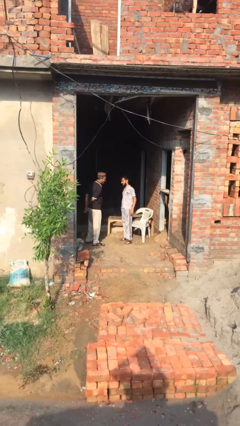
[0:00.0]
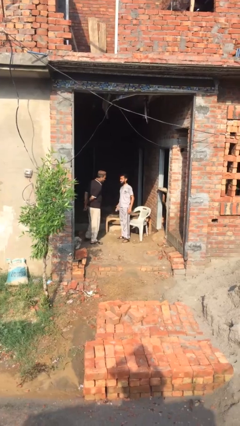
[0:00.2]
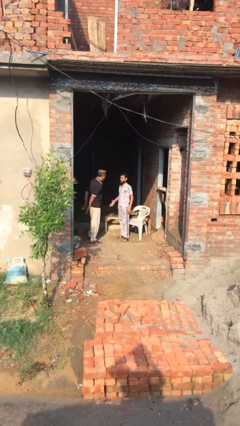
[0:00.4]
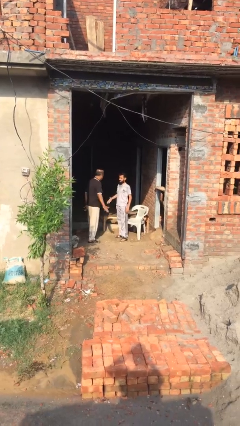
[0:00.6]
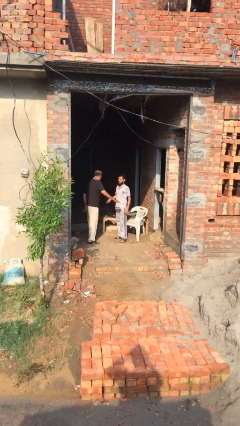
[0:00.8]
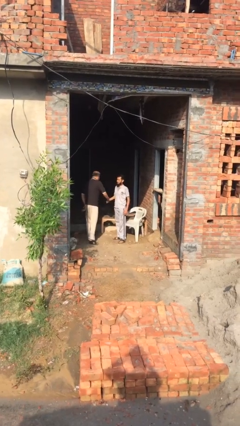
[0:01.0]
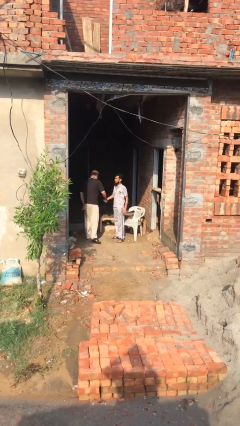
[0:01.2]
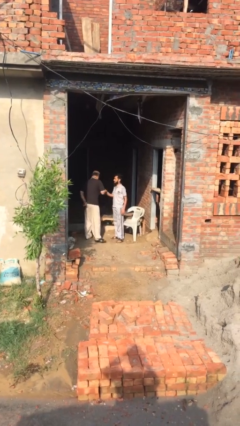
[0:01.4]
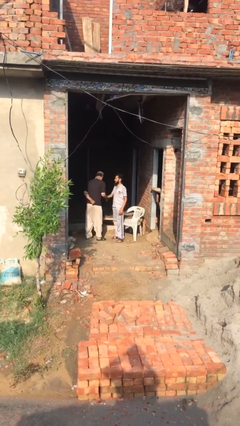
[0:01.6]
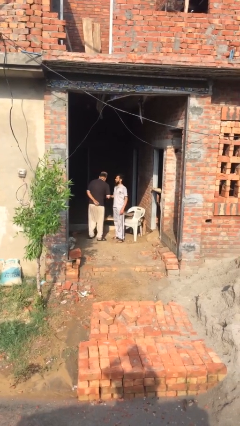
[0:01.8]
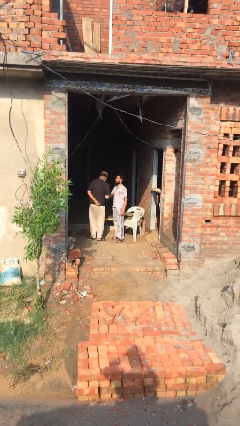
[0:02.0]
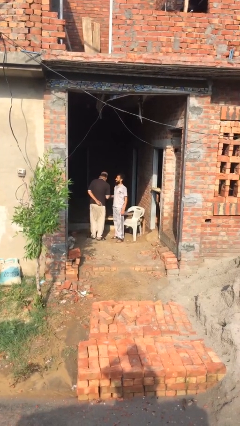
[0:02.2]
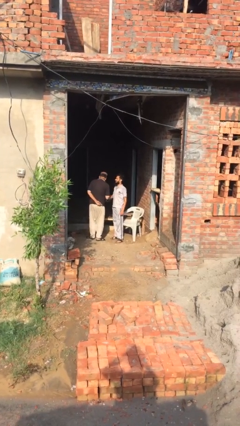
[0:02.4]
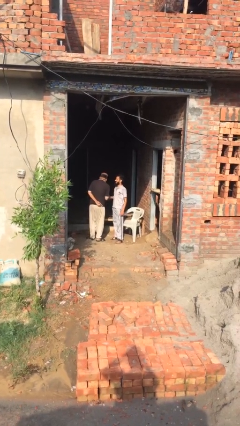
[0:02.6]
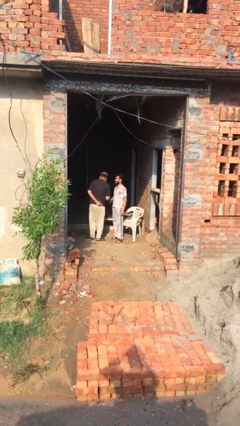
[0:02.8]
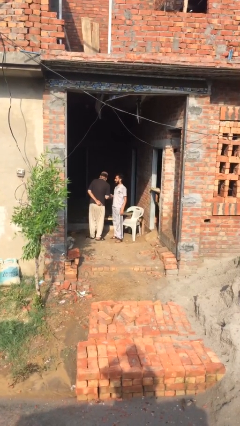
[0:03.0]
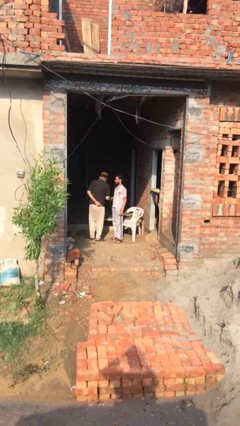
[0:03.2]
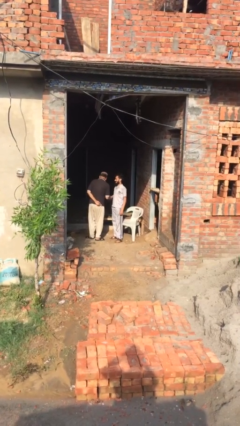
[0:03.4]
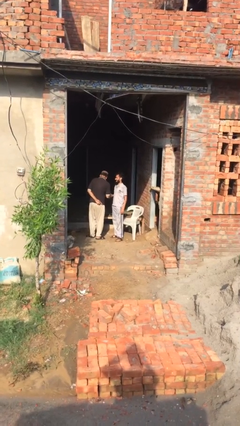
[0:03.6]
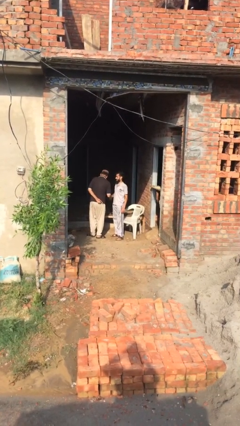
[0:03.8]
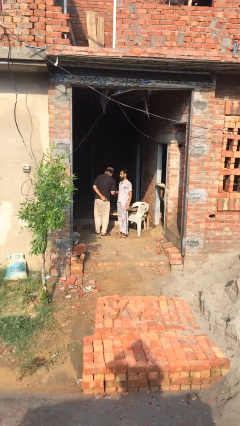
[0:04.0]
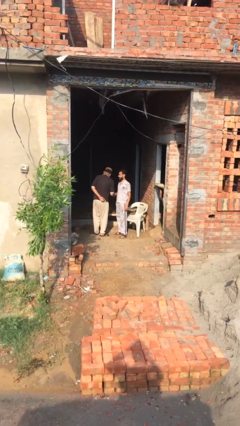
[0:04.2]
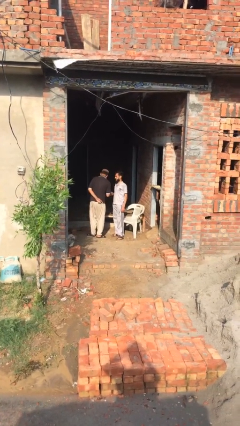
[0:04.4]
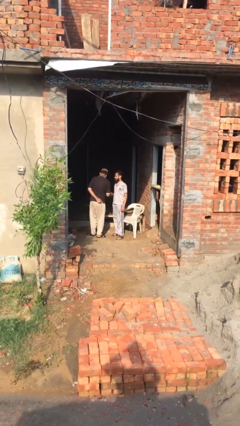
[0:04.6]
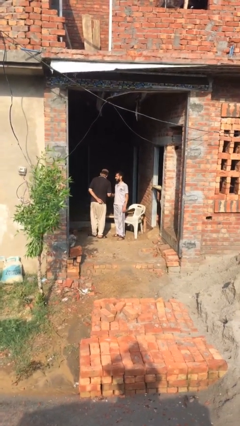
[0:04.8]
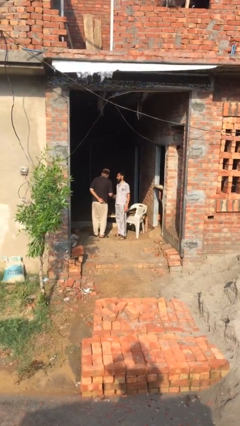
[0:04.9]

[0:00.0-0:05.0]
person shakes hand

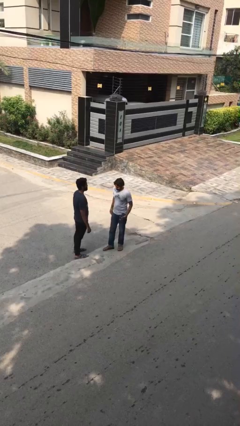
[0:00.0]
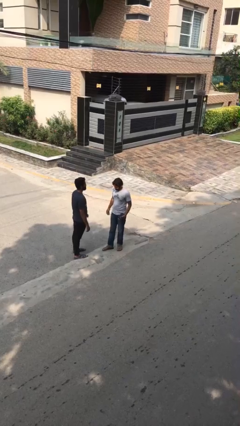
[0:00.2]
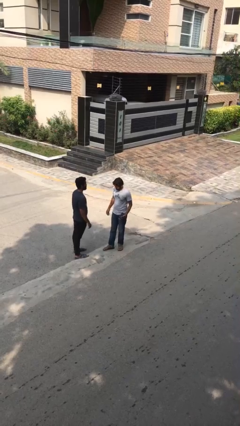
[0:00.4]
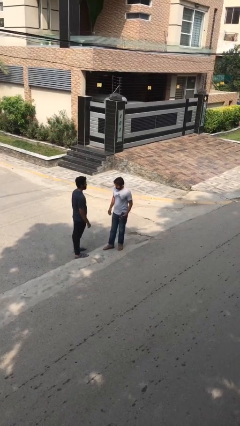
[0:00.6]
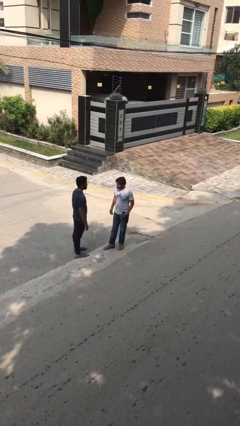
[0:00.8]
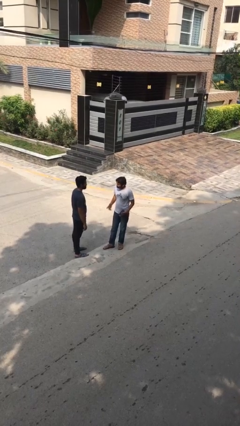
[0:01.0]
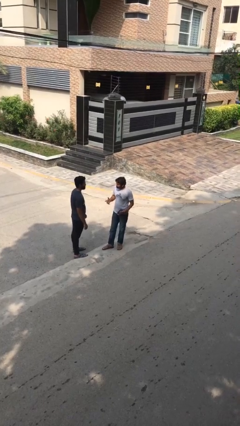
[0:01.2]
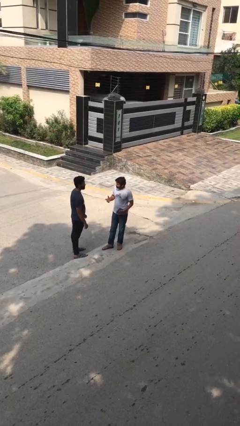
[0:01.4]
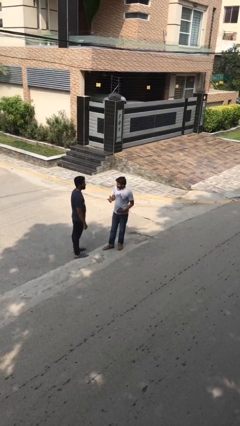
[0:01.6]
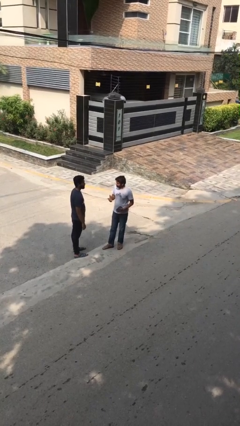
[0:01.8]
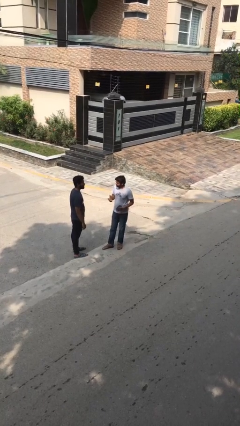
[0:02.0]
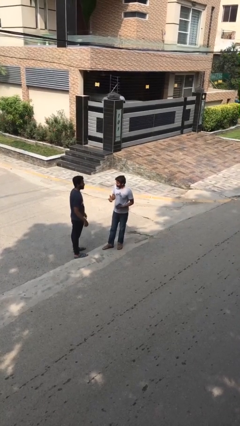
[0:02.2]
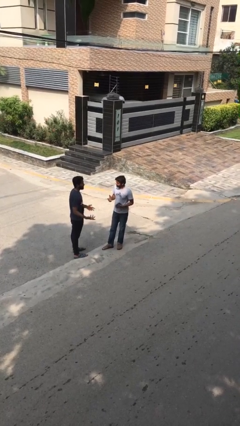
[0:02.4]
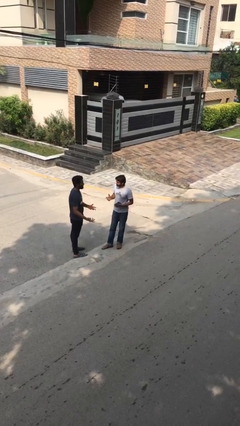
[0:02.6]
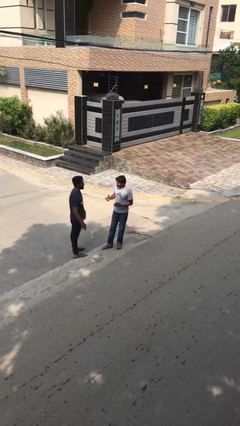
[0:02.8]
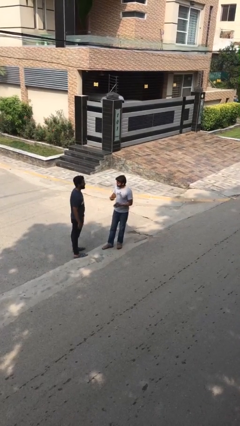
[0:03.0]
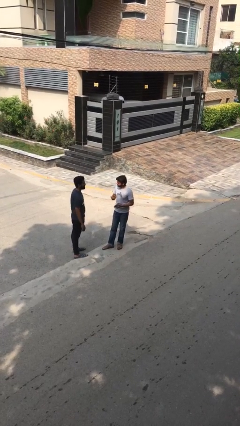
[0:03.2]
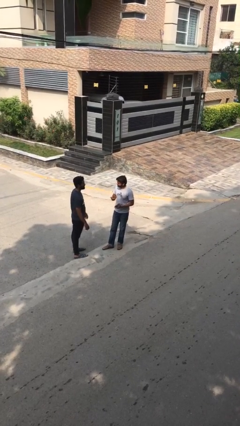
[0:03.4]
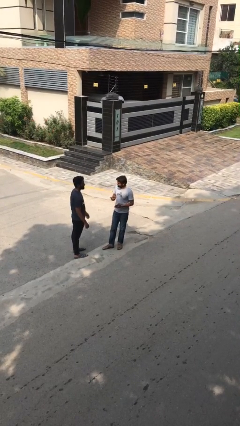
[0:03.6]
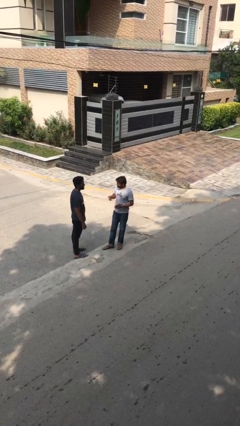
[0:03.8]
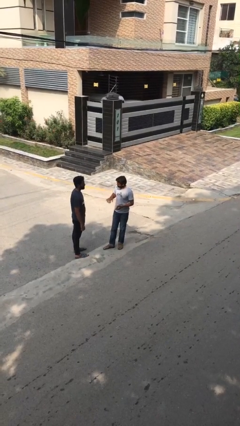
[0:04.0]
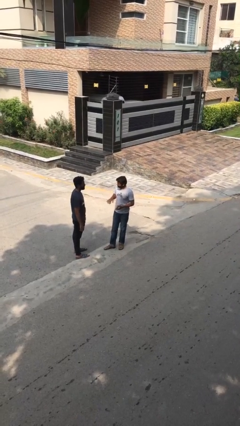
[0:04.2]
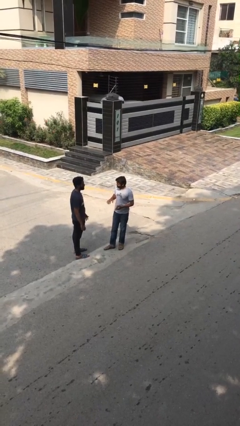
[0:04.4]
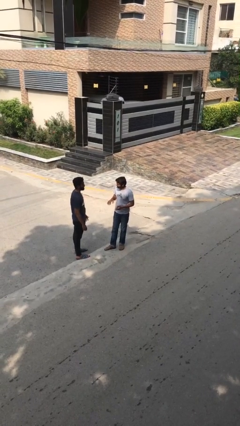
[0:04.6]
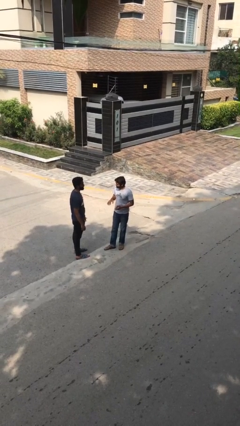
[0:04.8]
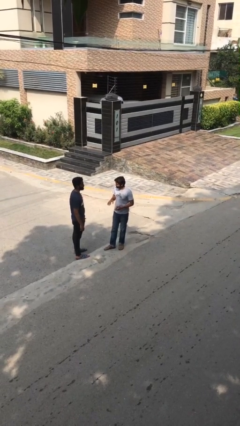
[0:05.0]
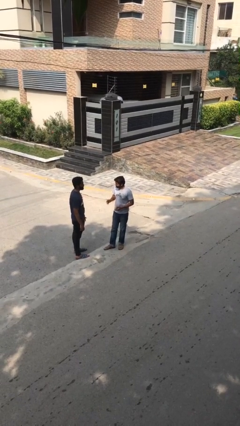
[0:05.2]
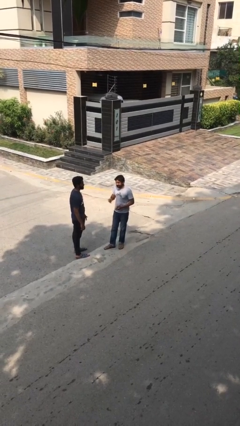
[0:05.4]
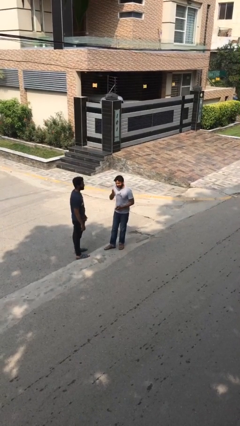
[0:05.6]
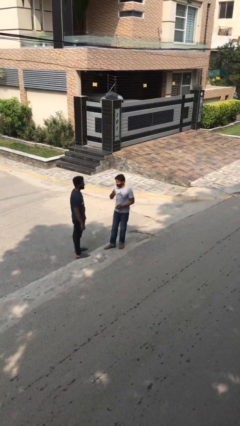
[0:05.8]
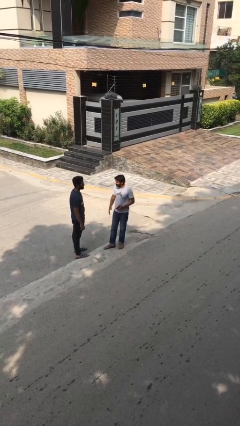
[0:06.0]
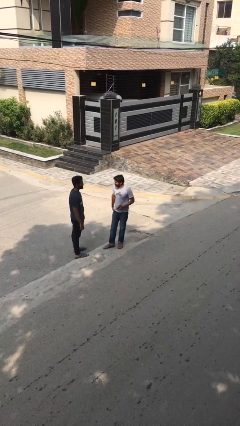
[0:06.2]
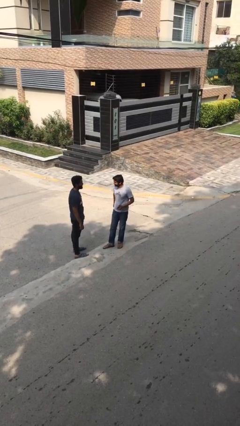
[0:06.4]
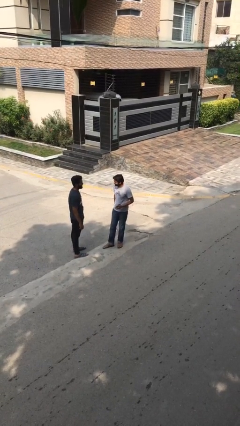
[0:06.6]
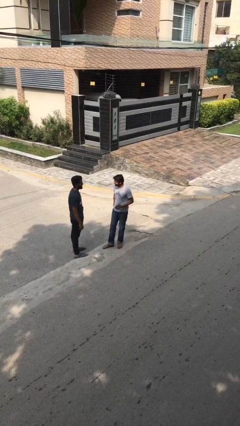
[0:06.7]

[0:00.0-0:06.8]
person talks to person

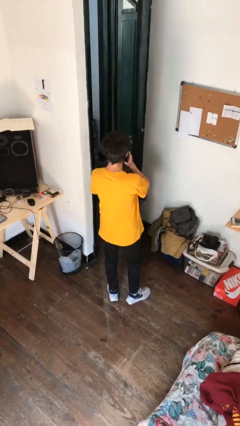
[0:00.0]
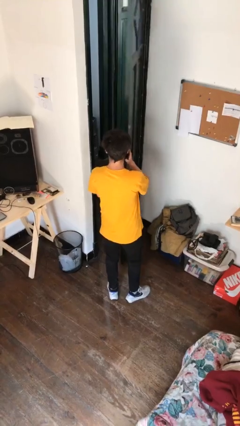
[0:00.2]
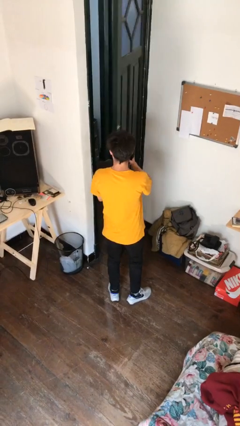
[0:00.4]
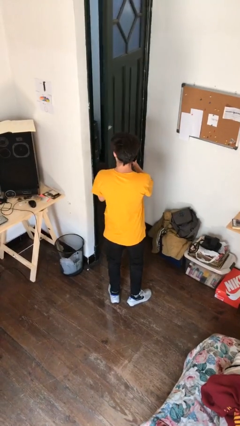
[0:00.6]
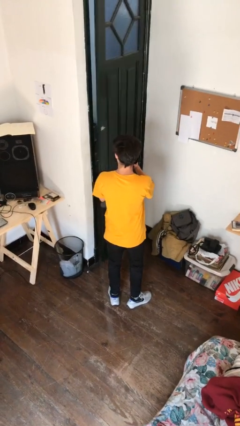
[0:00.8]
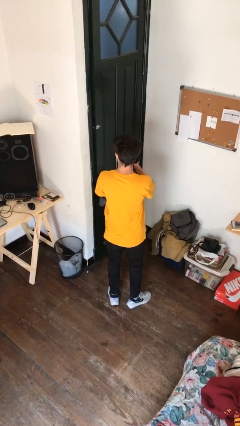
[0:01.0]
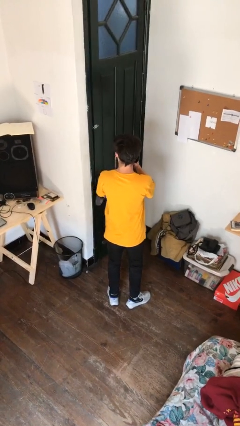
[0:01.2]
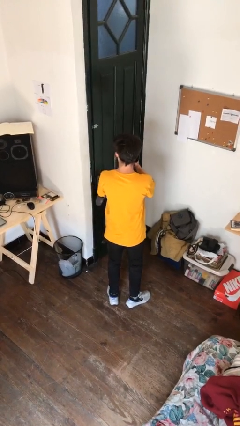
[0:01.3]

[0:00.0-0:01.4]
person closes facility door

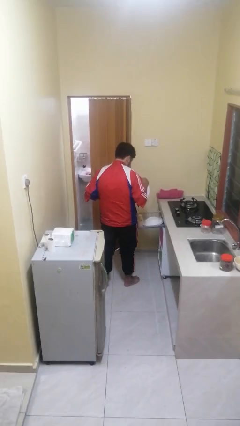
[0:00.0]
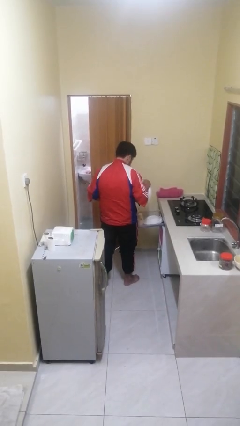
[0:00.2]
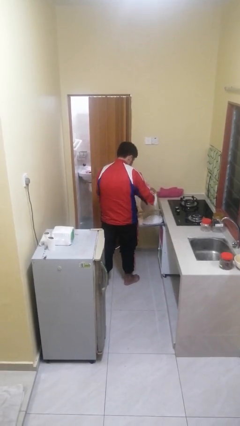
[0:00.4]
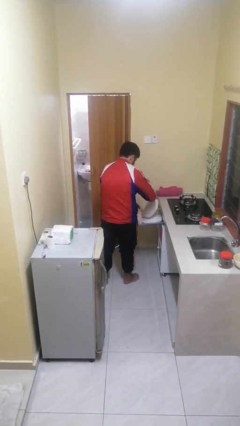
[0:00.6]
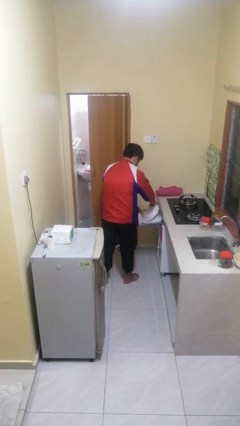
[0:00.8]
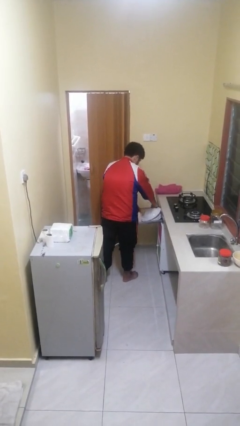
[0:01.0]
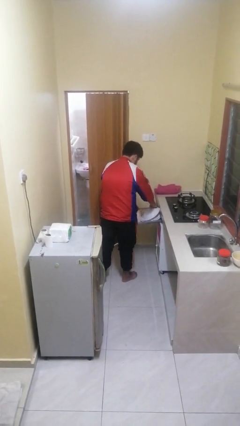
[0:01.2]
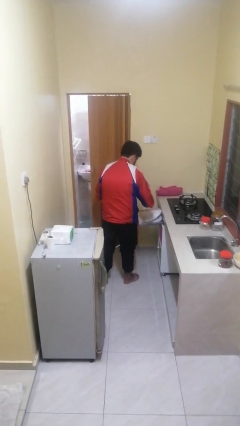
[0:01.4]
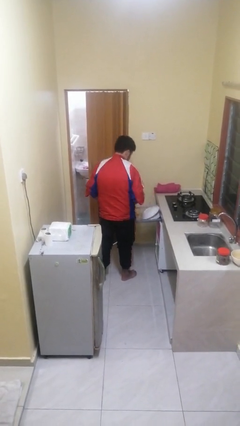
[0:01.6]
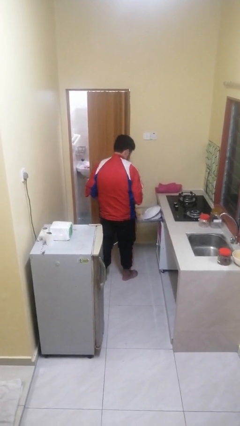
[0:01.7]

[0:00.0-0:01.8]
person puts object into kitchen drawer

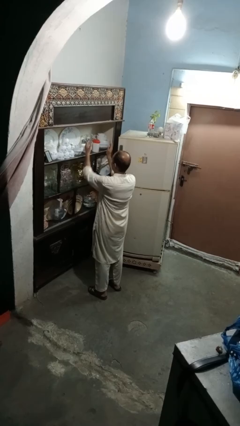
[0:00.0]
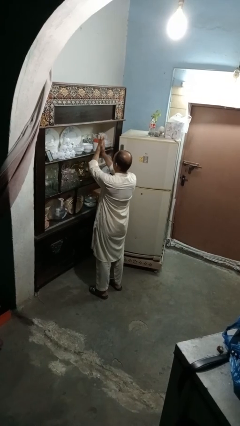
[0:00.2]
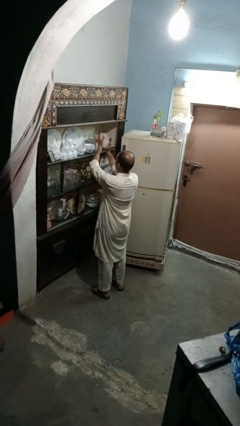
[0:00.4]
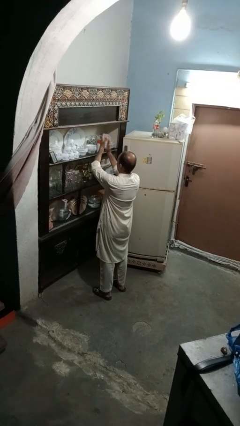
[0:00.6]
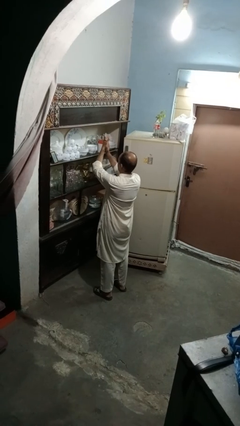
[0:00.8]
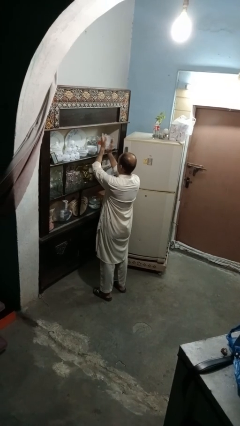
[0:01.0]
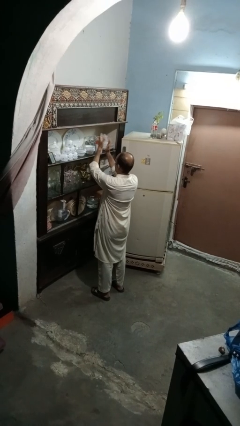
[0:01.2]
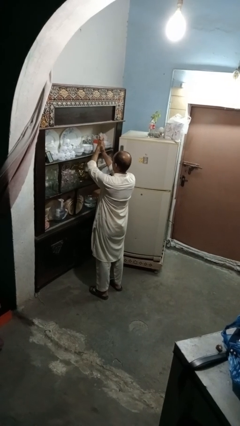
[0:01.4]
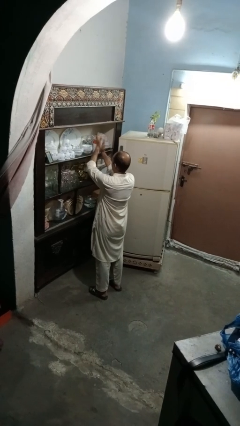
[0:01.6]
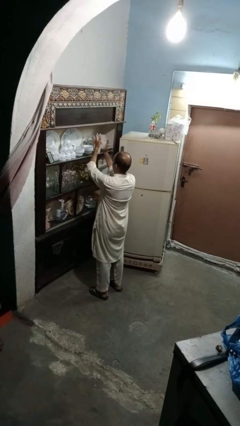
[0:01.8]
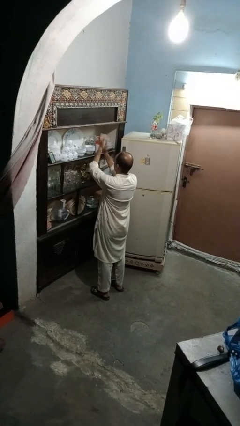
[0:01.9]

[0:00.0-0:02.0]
person claps hands

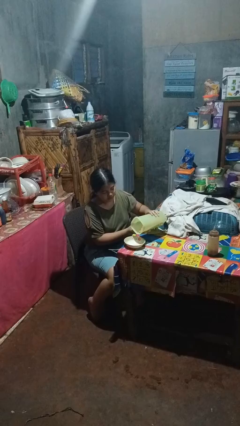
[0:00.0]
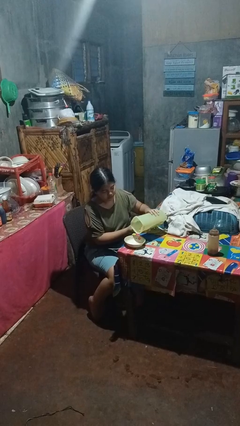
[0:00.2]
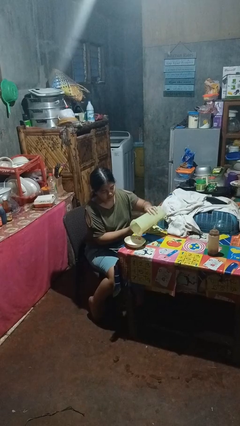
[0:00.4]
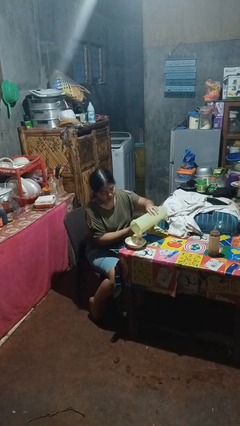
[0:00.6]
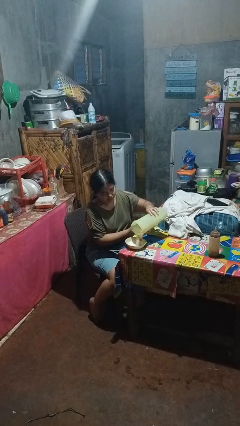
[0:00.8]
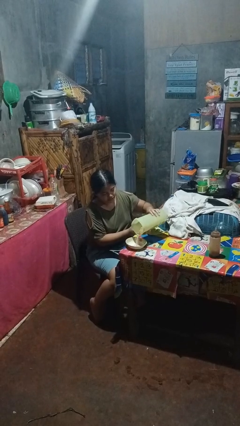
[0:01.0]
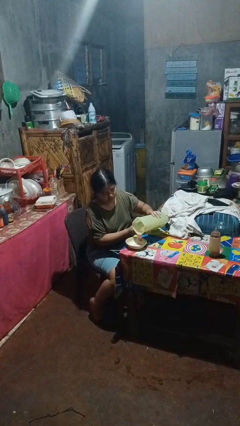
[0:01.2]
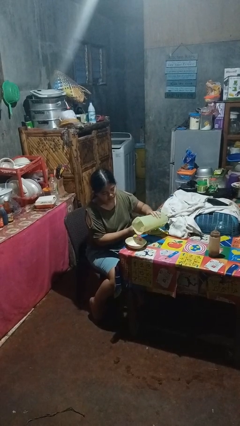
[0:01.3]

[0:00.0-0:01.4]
person pours into bowl
